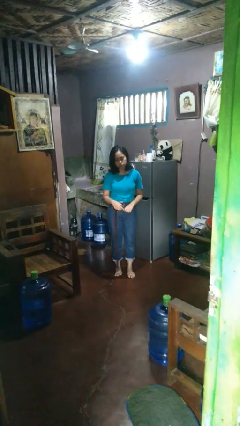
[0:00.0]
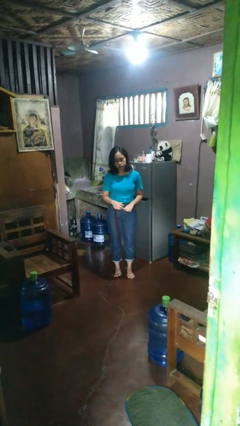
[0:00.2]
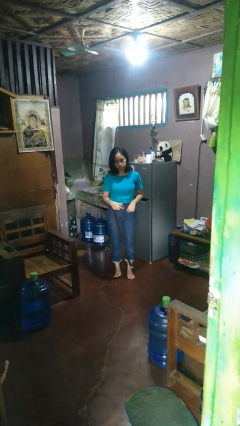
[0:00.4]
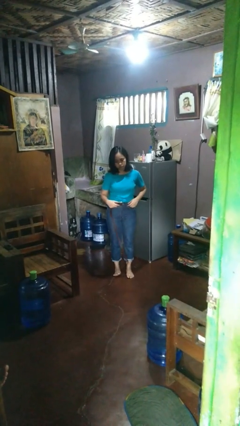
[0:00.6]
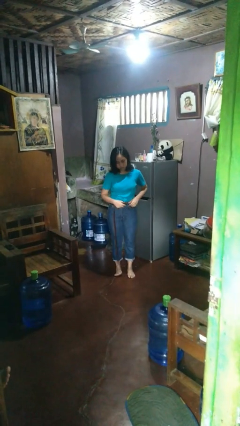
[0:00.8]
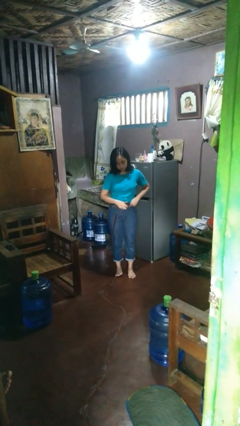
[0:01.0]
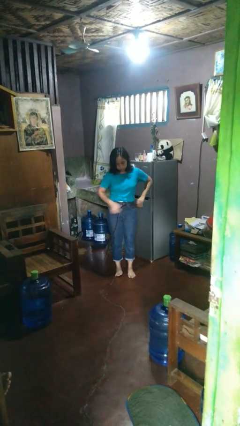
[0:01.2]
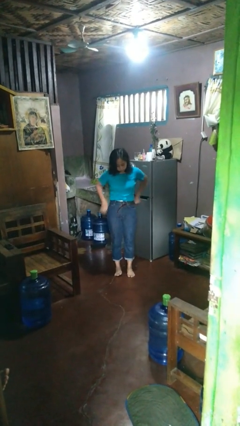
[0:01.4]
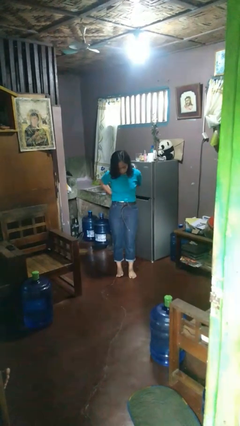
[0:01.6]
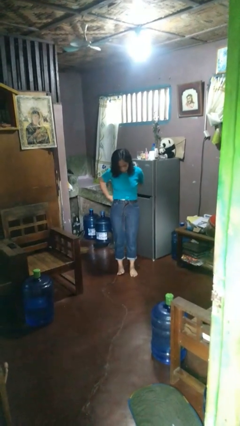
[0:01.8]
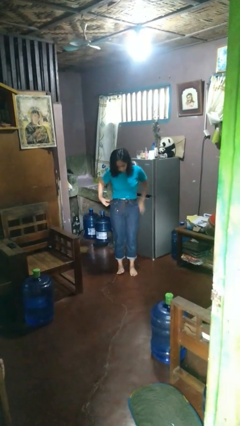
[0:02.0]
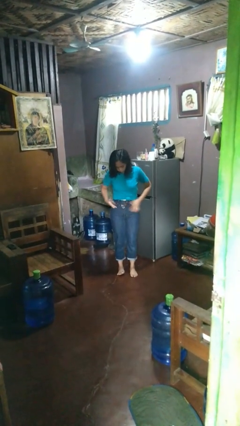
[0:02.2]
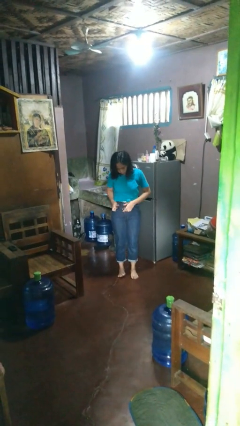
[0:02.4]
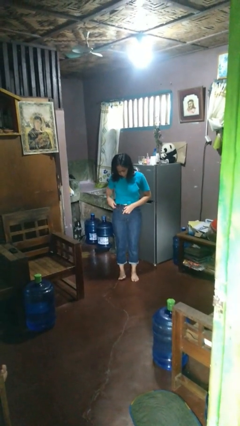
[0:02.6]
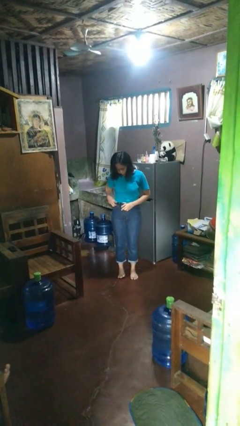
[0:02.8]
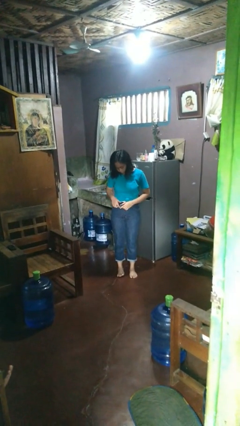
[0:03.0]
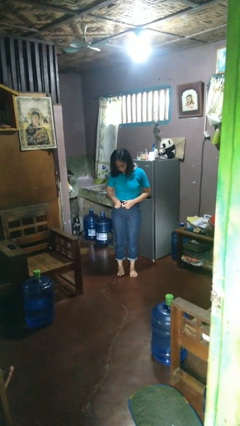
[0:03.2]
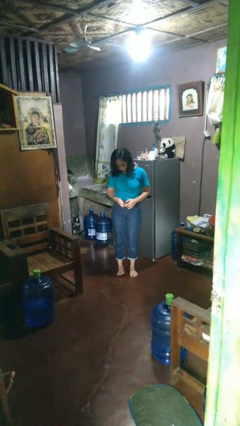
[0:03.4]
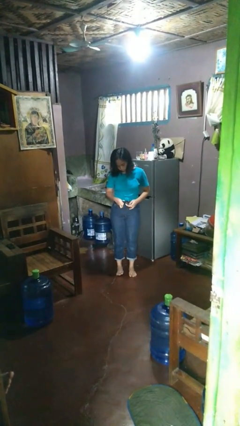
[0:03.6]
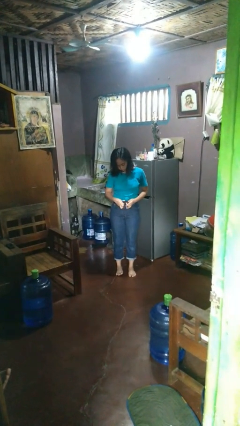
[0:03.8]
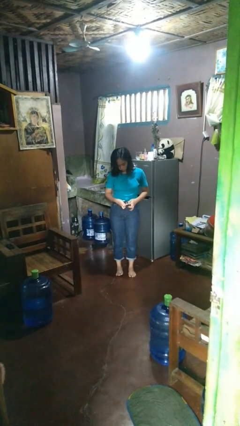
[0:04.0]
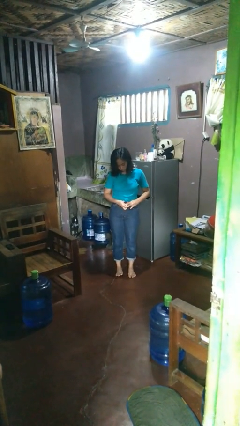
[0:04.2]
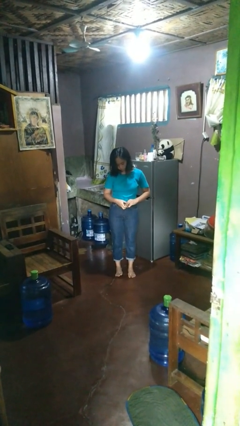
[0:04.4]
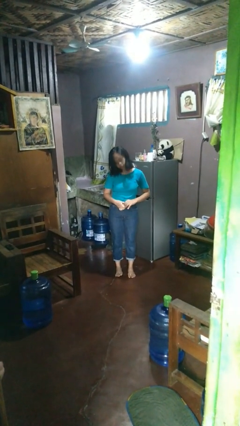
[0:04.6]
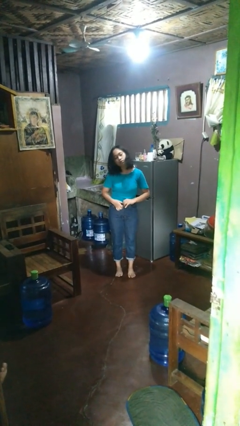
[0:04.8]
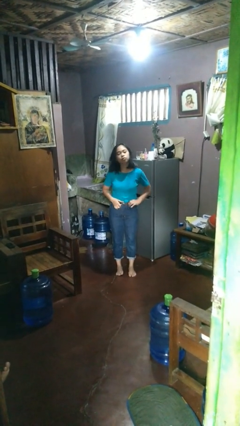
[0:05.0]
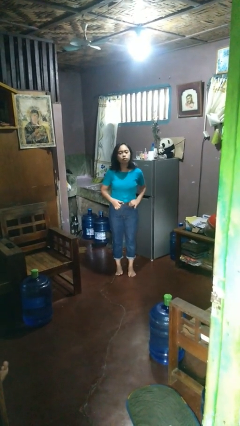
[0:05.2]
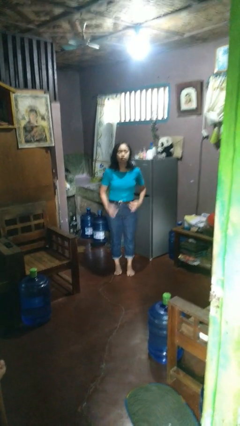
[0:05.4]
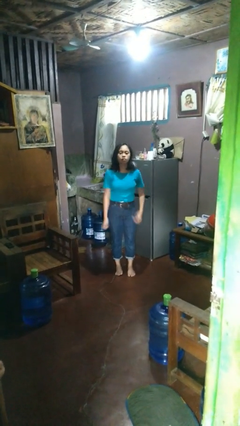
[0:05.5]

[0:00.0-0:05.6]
person puts on belt

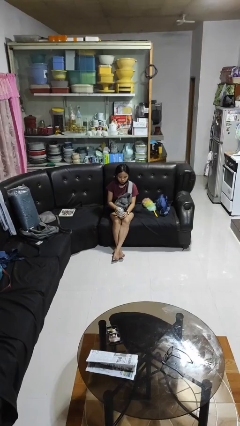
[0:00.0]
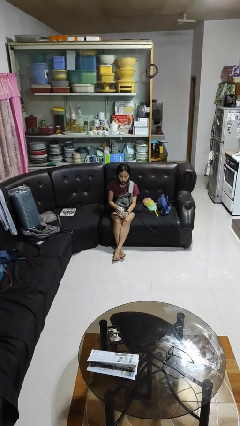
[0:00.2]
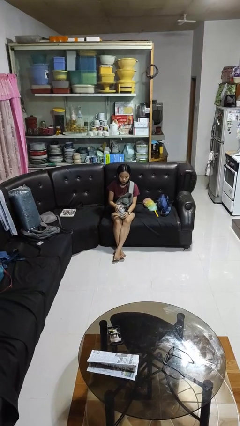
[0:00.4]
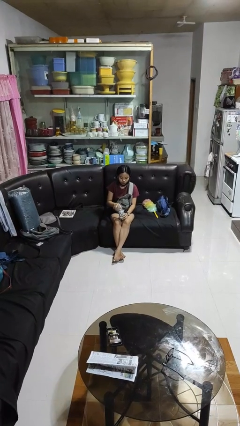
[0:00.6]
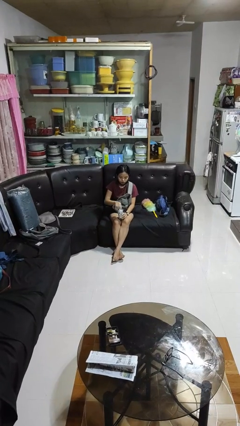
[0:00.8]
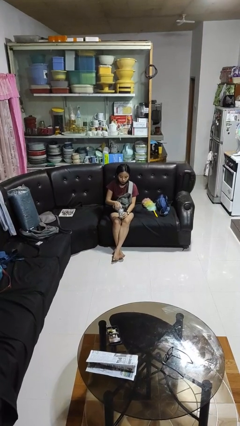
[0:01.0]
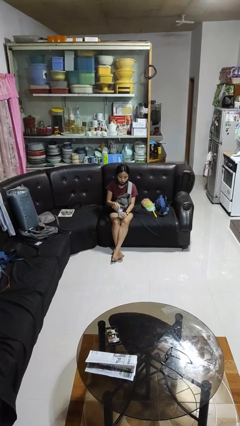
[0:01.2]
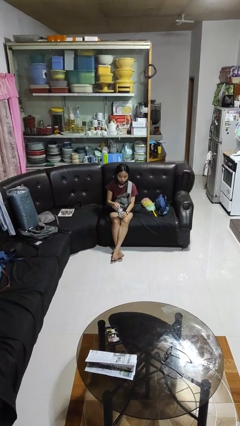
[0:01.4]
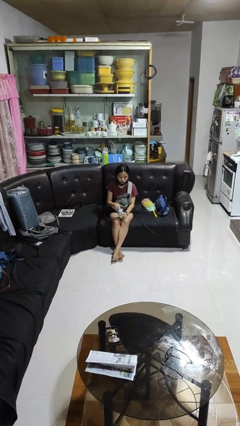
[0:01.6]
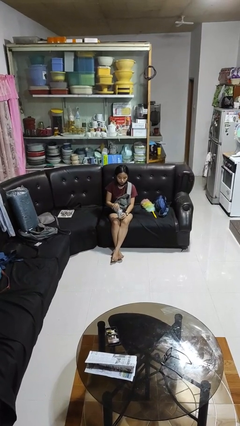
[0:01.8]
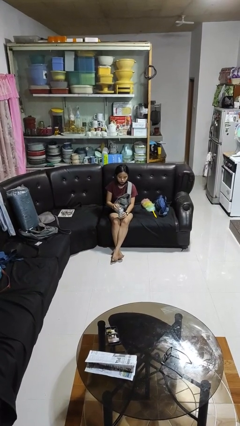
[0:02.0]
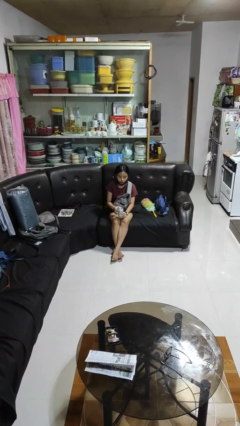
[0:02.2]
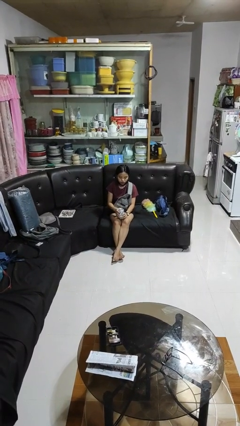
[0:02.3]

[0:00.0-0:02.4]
person opens beverage can

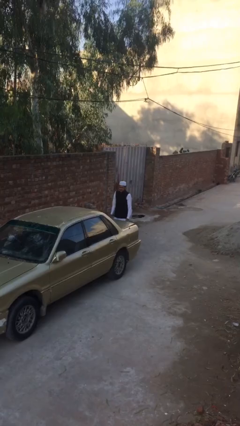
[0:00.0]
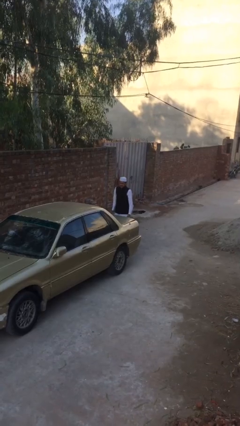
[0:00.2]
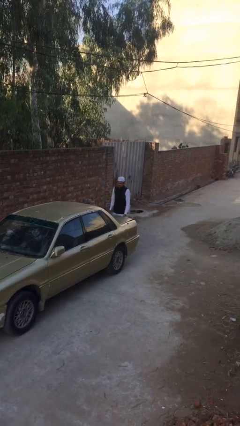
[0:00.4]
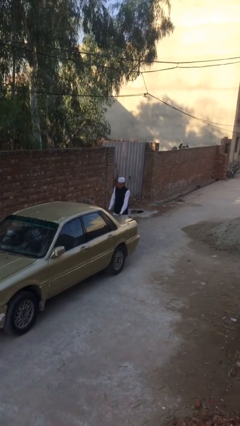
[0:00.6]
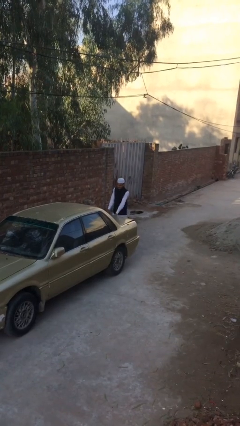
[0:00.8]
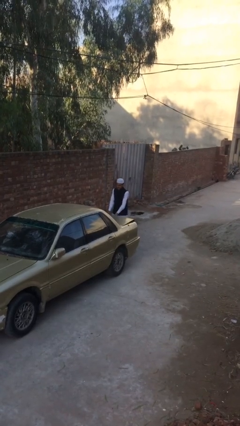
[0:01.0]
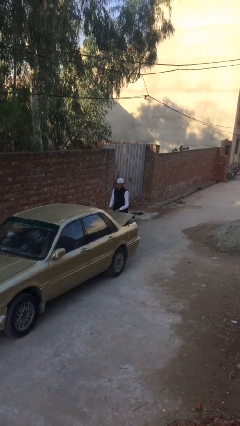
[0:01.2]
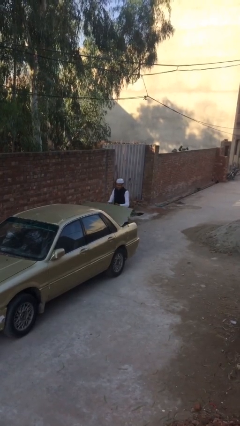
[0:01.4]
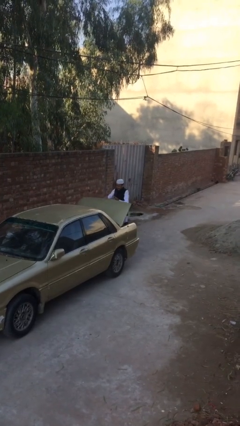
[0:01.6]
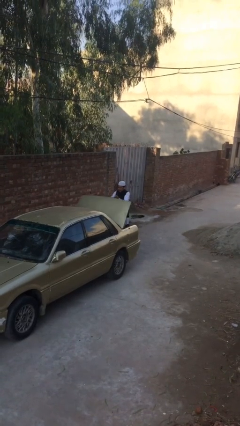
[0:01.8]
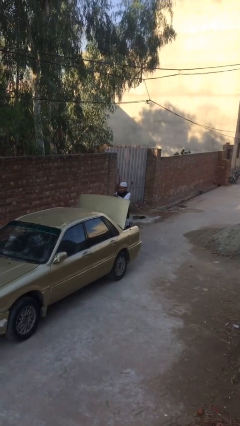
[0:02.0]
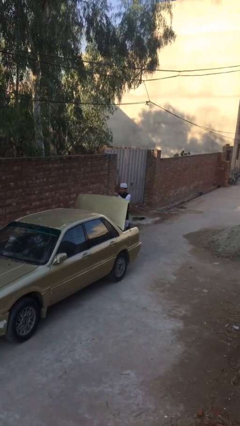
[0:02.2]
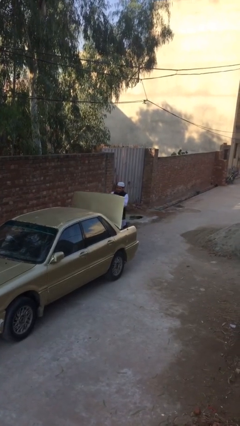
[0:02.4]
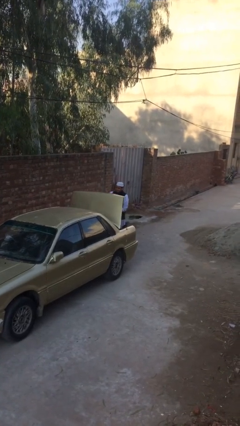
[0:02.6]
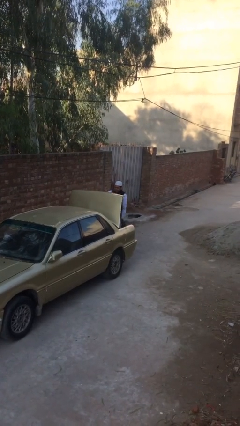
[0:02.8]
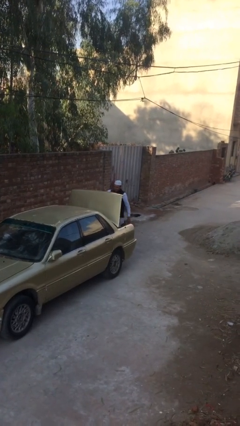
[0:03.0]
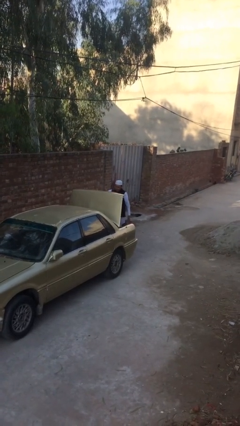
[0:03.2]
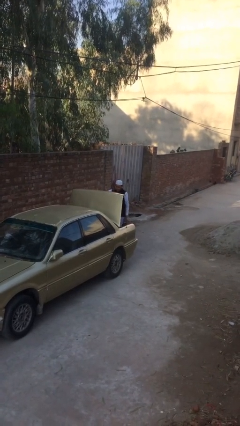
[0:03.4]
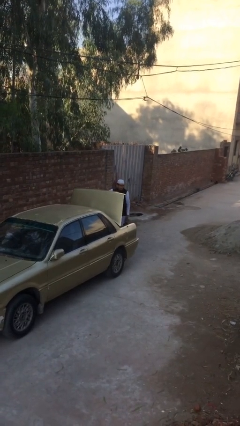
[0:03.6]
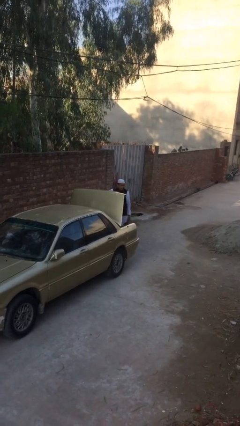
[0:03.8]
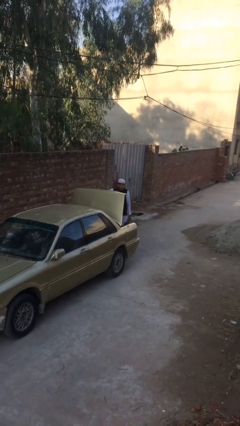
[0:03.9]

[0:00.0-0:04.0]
person opens car trunk

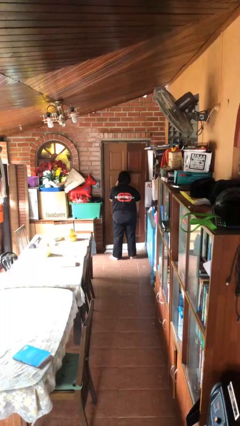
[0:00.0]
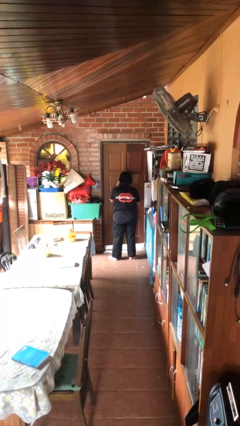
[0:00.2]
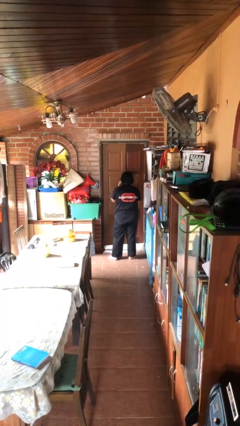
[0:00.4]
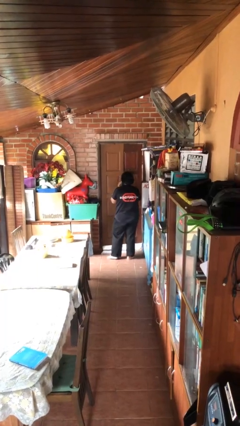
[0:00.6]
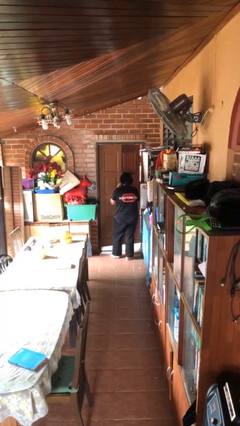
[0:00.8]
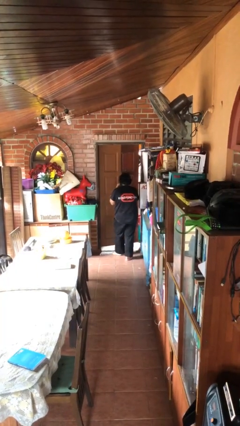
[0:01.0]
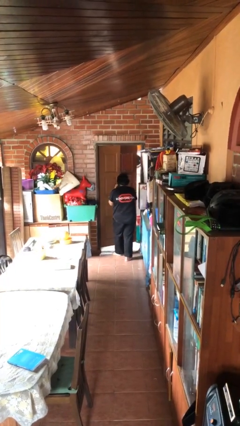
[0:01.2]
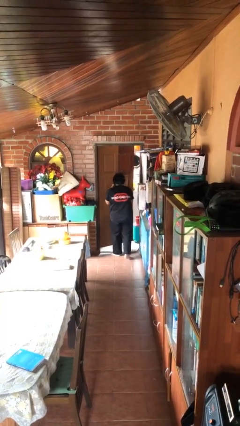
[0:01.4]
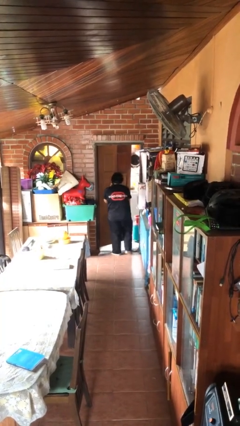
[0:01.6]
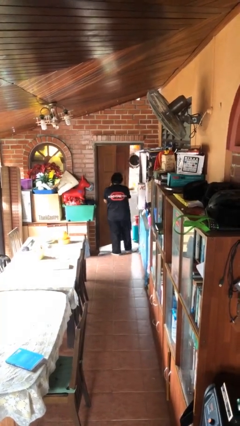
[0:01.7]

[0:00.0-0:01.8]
person opens facility door

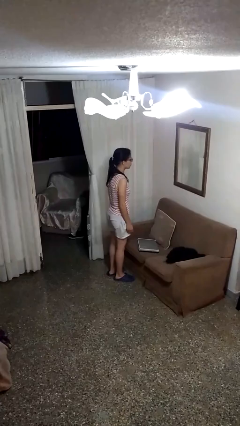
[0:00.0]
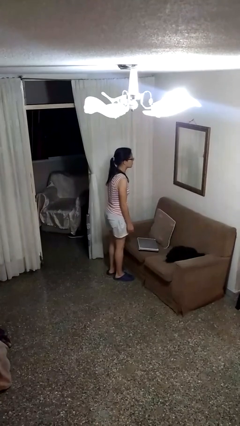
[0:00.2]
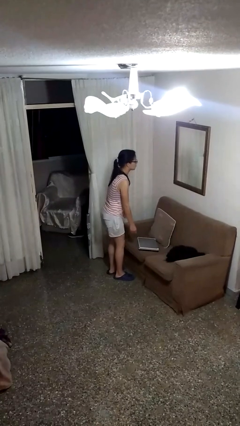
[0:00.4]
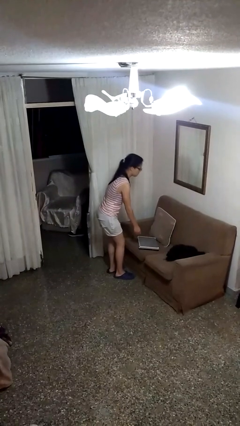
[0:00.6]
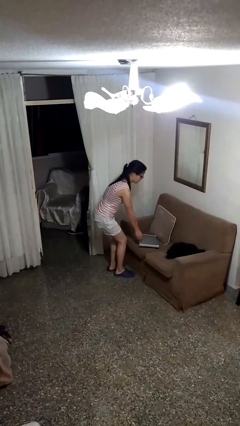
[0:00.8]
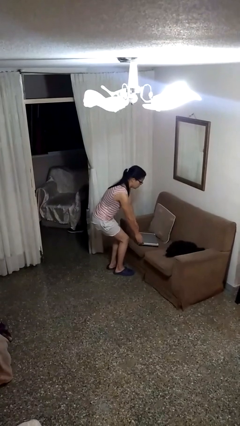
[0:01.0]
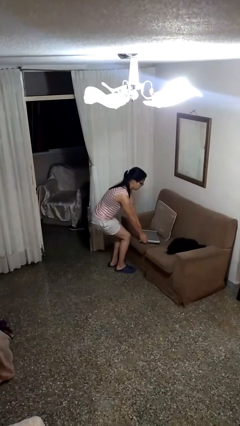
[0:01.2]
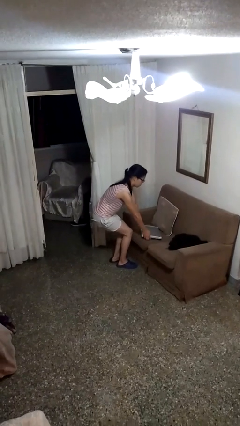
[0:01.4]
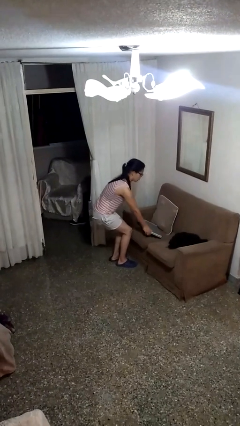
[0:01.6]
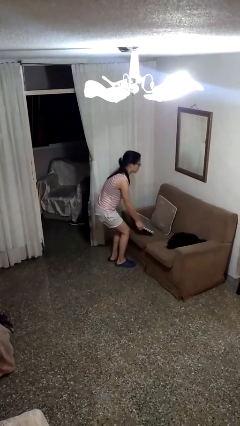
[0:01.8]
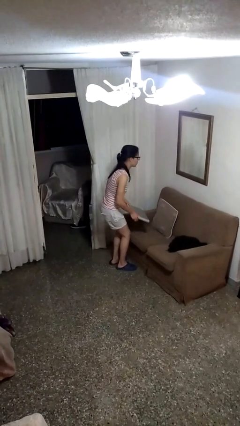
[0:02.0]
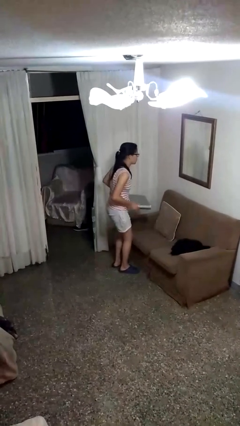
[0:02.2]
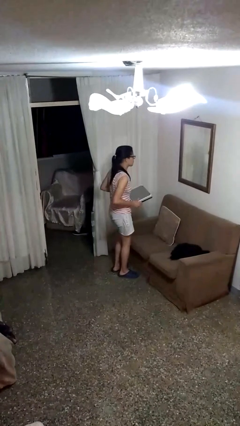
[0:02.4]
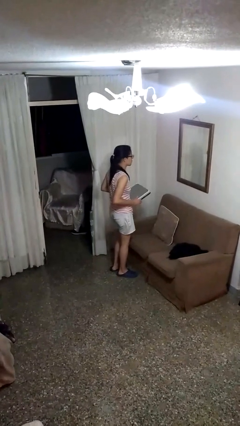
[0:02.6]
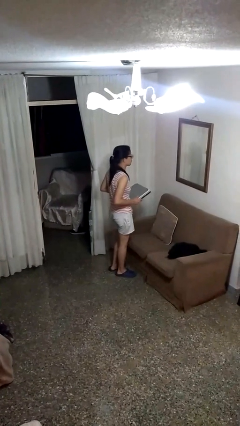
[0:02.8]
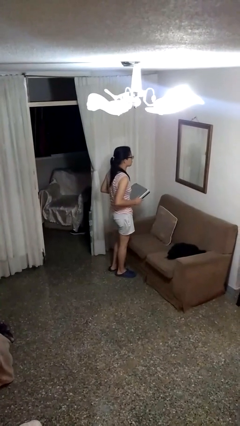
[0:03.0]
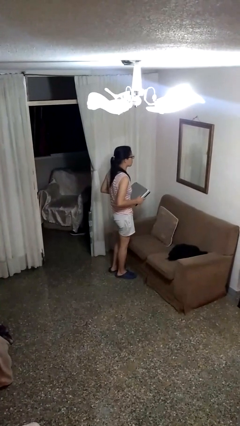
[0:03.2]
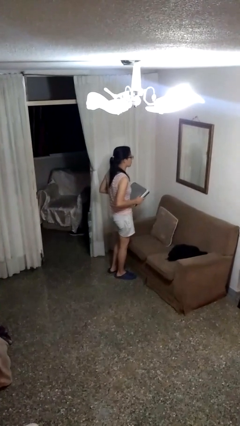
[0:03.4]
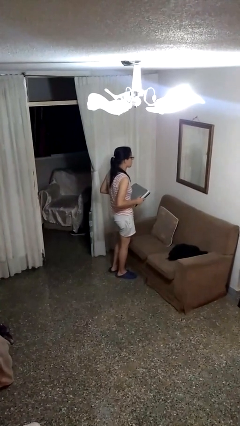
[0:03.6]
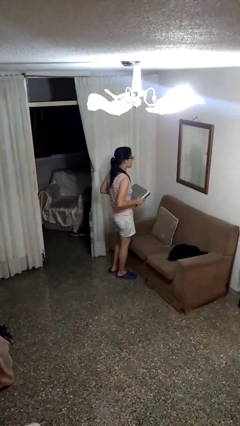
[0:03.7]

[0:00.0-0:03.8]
person picks up object from couch
